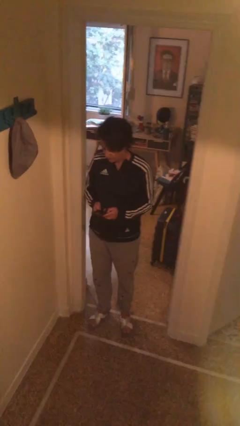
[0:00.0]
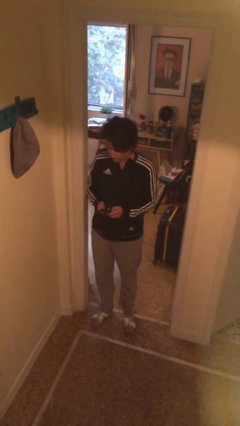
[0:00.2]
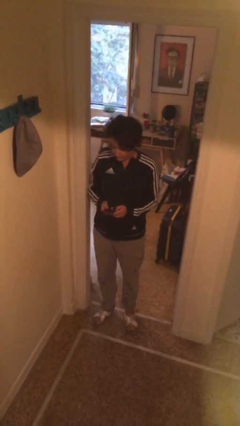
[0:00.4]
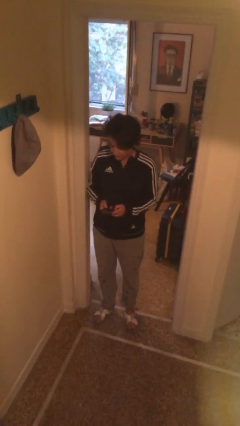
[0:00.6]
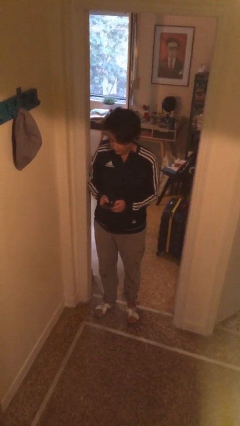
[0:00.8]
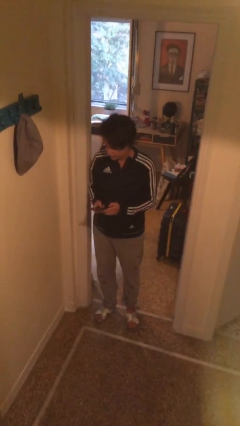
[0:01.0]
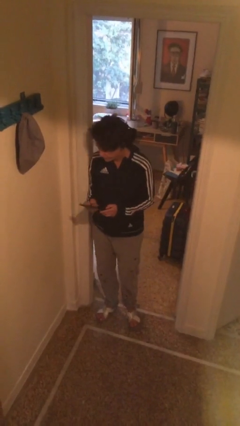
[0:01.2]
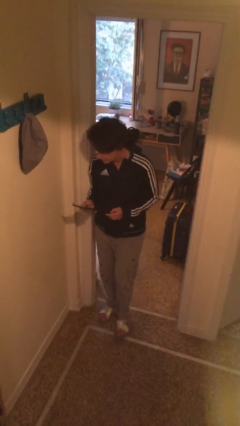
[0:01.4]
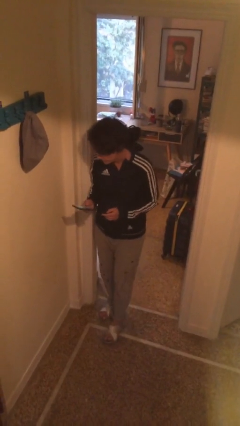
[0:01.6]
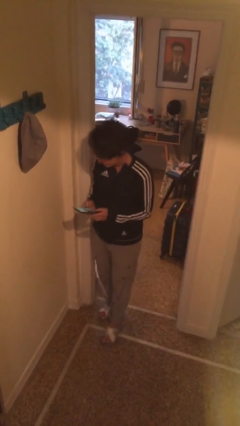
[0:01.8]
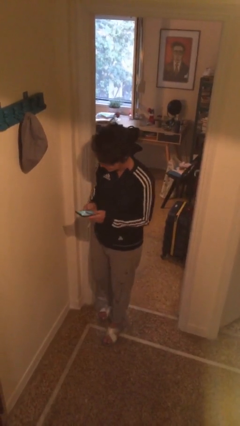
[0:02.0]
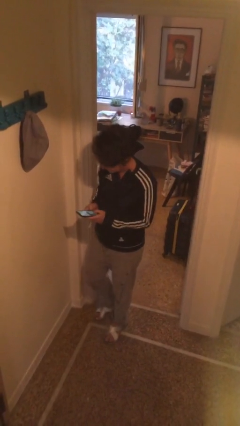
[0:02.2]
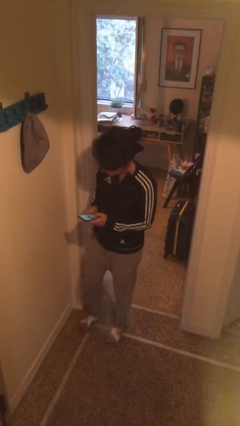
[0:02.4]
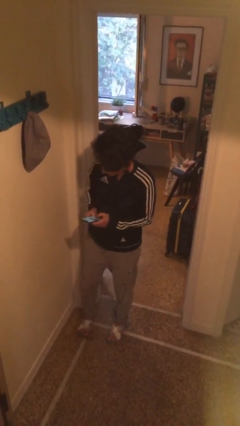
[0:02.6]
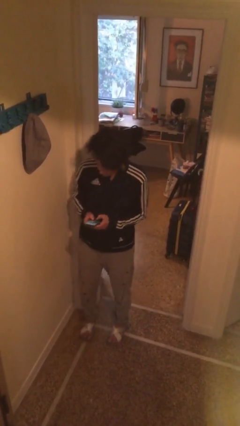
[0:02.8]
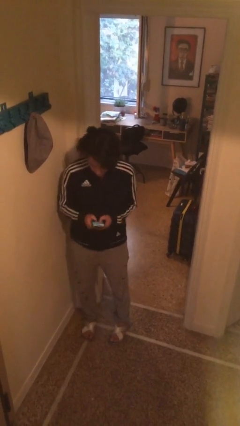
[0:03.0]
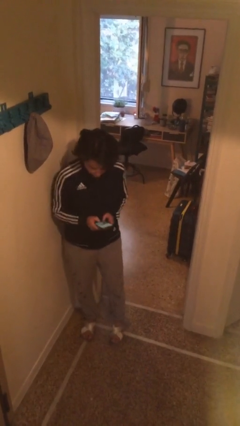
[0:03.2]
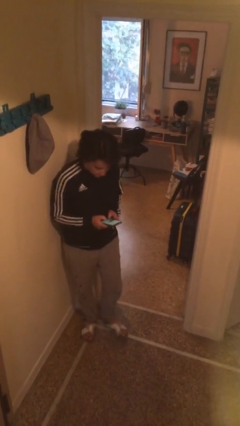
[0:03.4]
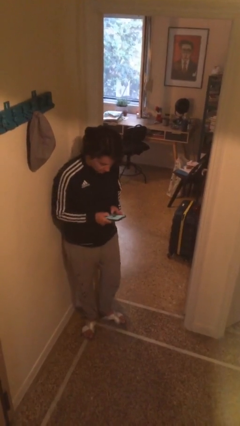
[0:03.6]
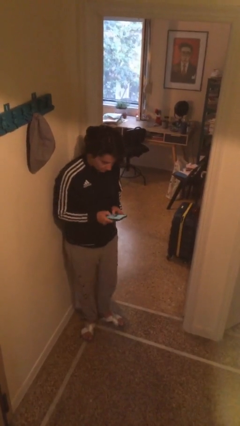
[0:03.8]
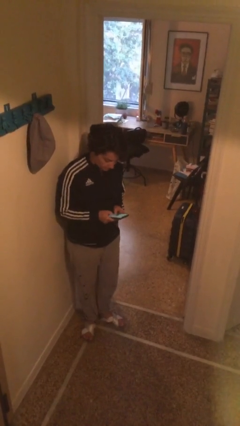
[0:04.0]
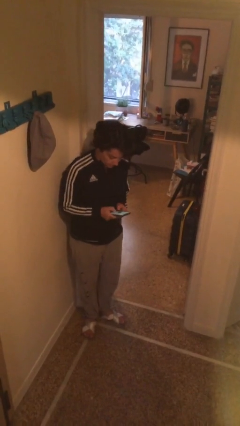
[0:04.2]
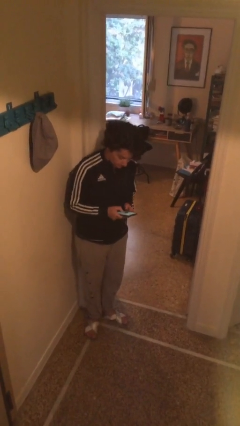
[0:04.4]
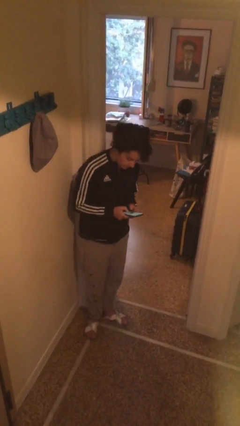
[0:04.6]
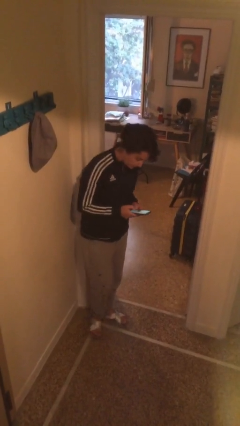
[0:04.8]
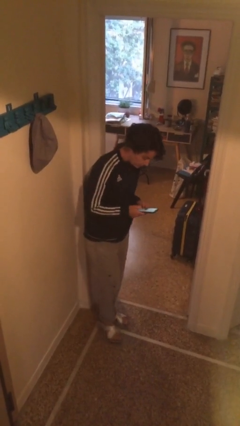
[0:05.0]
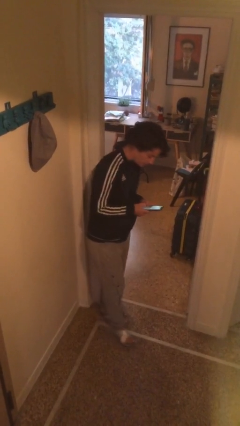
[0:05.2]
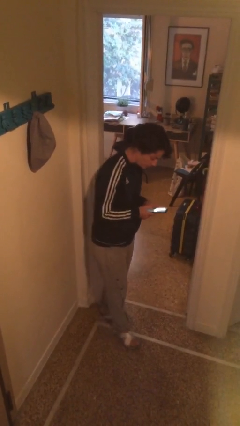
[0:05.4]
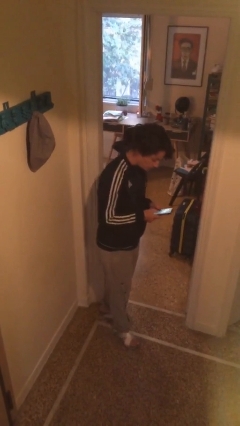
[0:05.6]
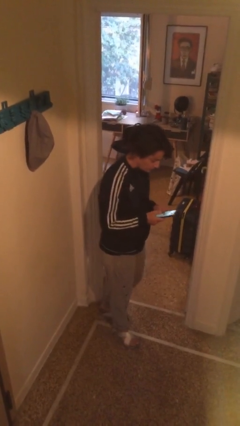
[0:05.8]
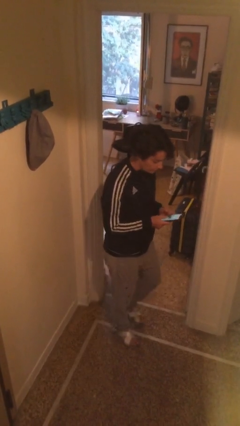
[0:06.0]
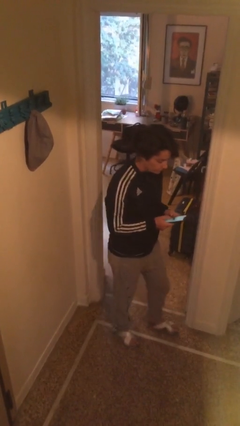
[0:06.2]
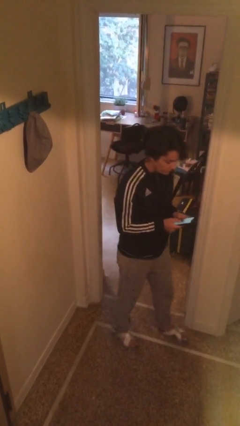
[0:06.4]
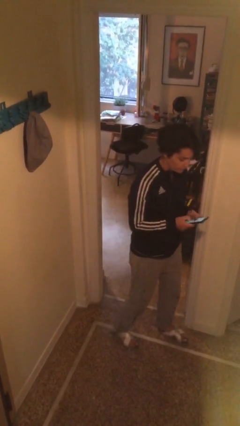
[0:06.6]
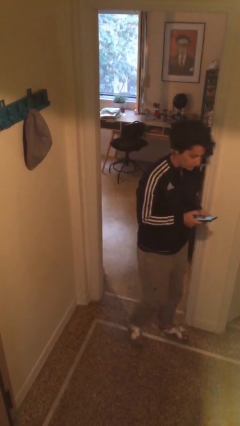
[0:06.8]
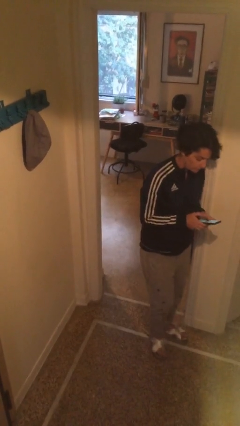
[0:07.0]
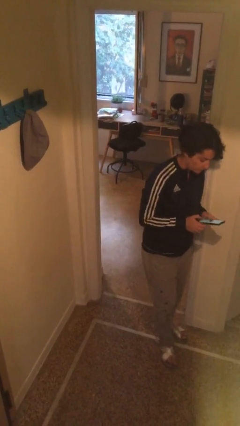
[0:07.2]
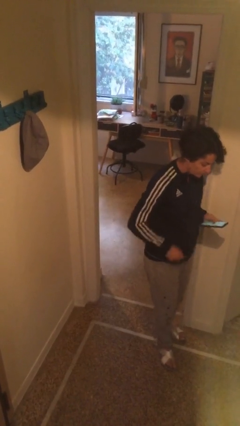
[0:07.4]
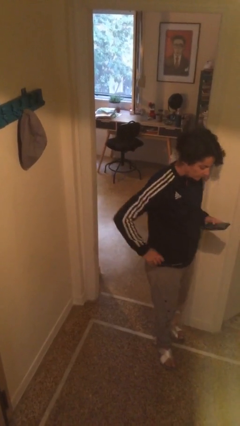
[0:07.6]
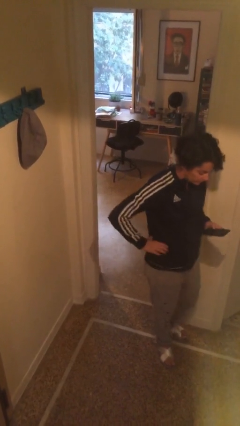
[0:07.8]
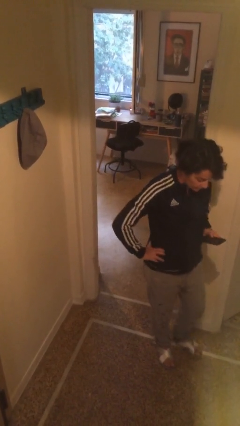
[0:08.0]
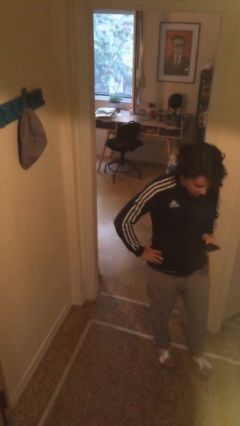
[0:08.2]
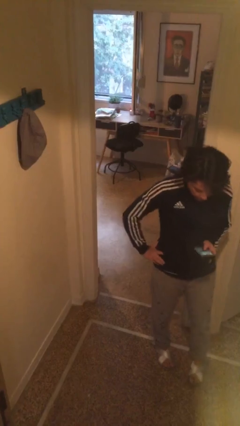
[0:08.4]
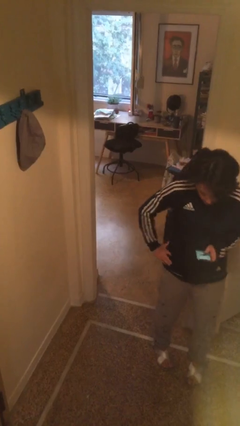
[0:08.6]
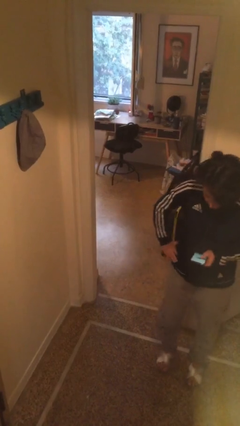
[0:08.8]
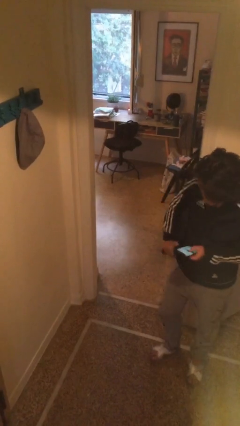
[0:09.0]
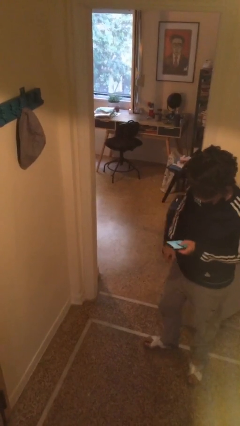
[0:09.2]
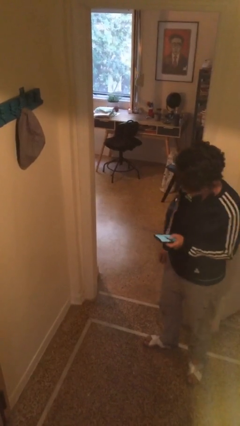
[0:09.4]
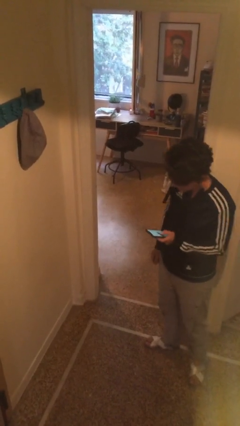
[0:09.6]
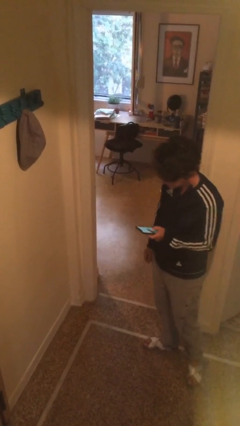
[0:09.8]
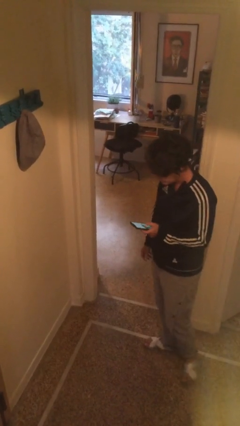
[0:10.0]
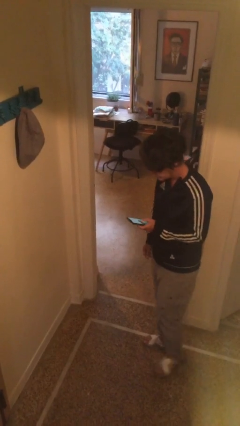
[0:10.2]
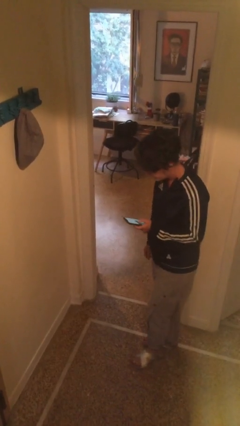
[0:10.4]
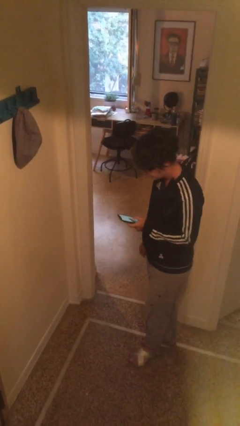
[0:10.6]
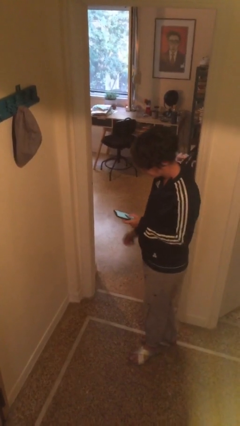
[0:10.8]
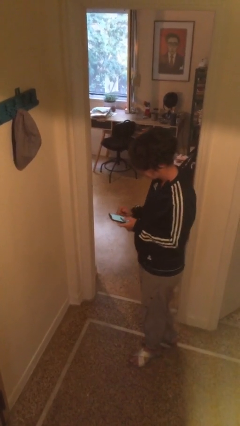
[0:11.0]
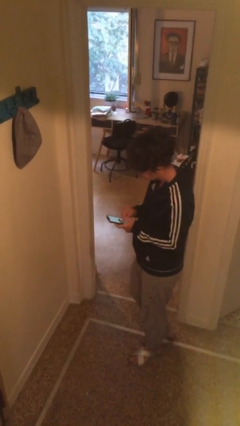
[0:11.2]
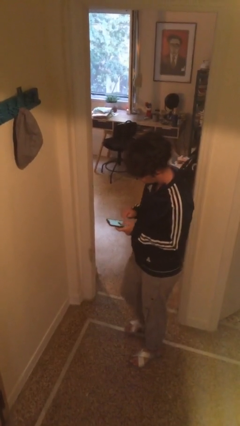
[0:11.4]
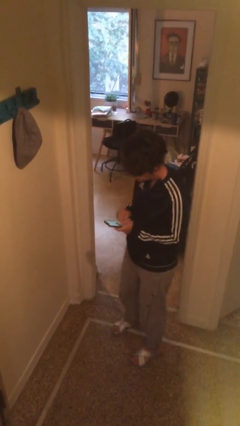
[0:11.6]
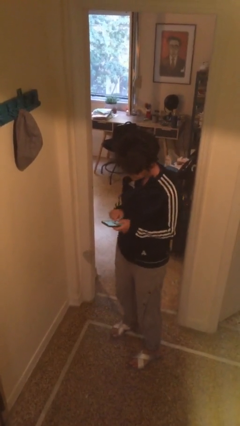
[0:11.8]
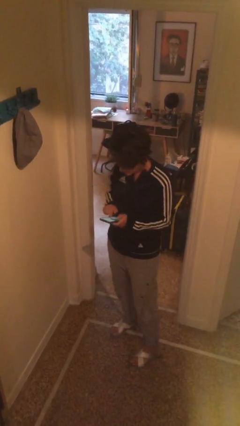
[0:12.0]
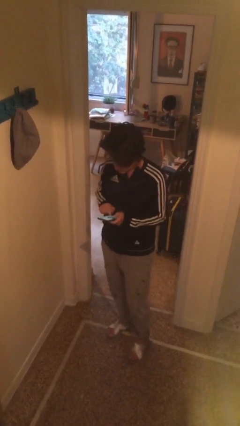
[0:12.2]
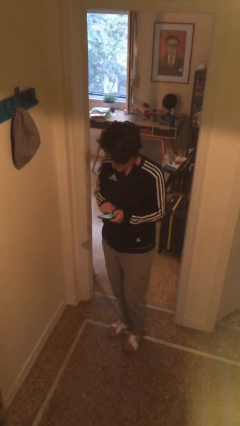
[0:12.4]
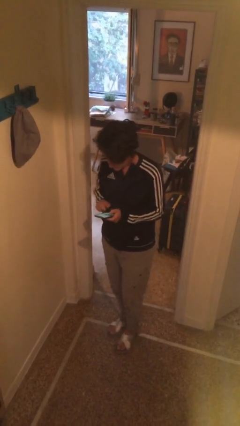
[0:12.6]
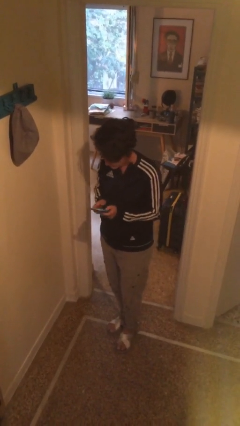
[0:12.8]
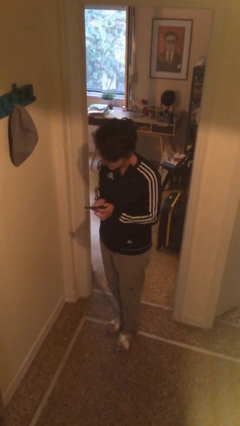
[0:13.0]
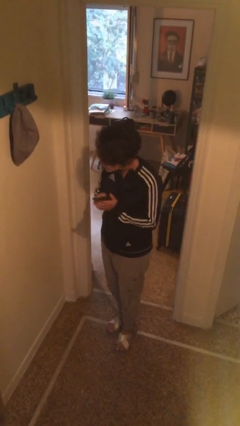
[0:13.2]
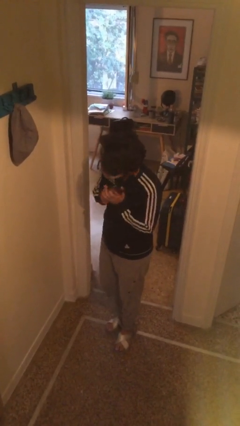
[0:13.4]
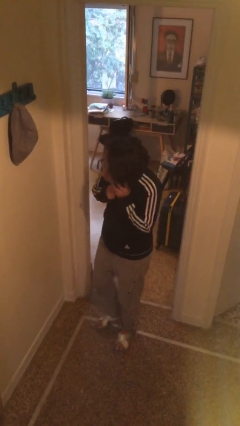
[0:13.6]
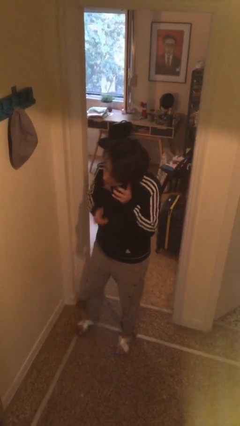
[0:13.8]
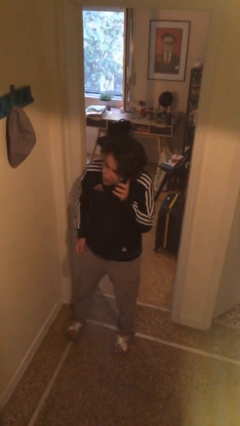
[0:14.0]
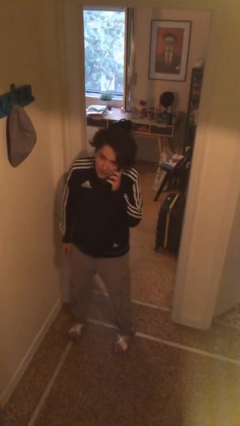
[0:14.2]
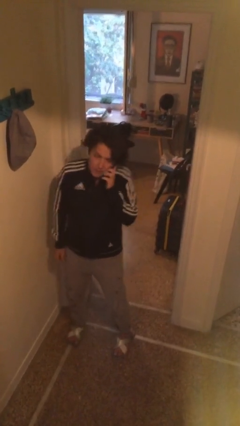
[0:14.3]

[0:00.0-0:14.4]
person texts on phone

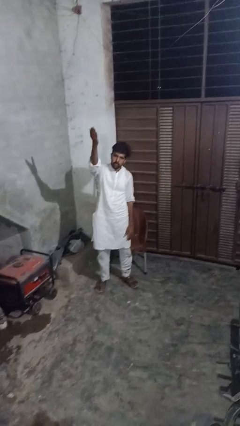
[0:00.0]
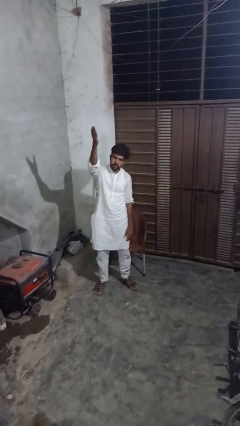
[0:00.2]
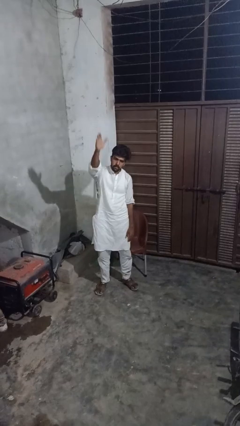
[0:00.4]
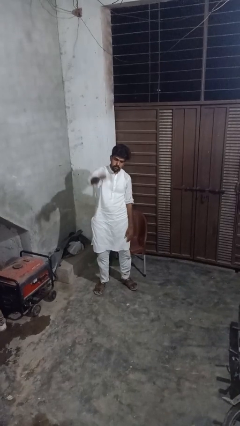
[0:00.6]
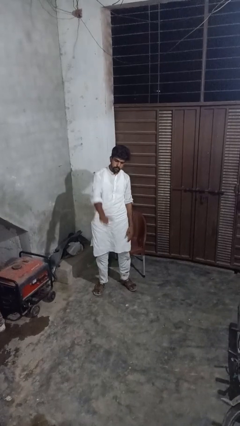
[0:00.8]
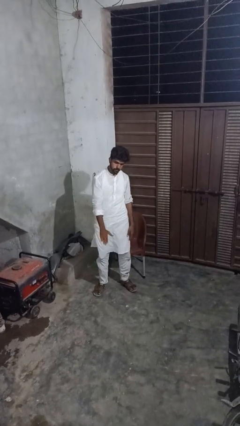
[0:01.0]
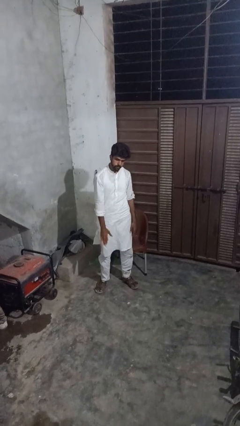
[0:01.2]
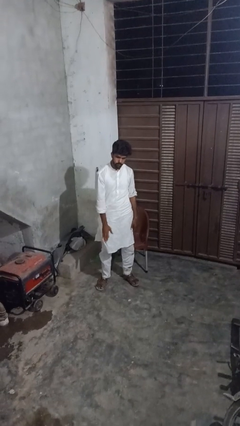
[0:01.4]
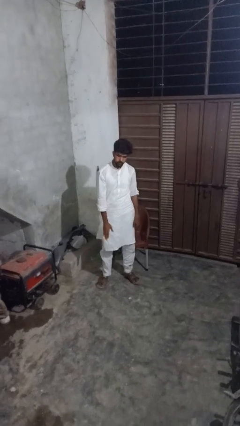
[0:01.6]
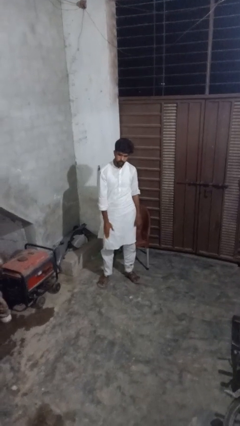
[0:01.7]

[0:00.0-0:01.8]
person gestures swipe down

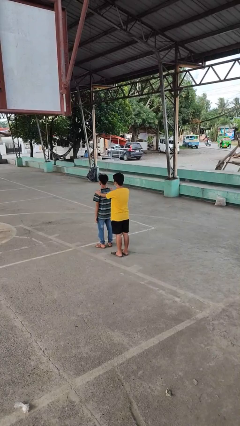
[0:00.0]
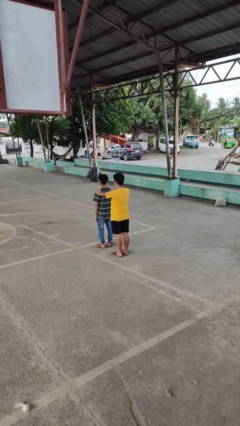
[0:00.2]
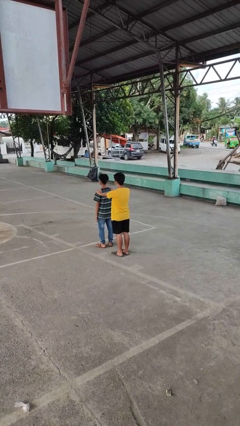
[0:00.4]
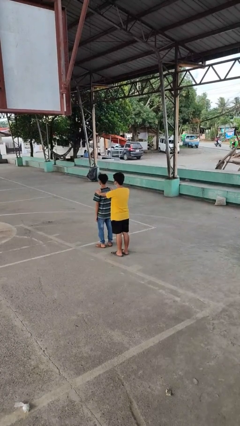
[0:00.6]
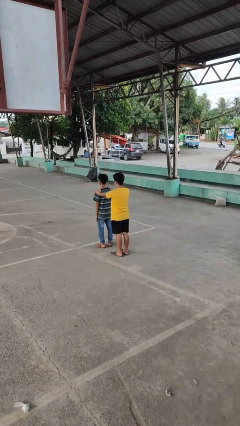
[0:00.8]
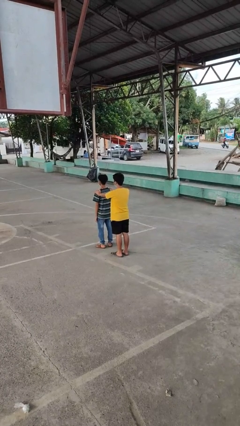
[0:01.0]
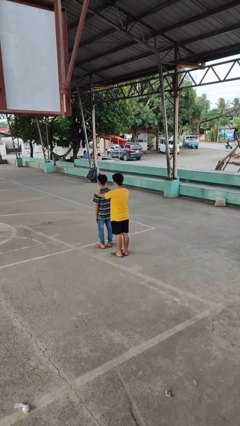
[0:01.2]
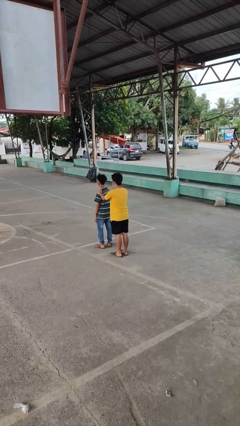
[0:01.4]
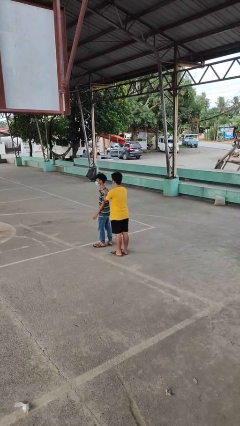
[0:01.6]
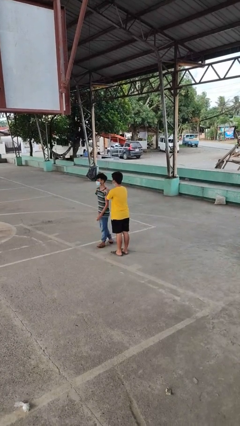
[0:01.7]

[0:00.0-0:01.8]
person grabs person by shoulder
